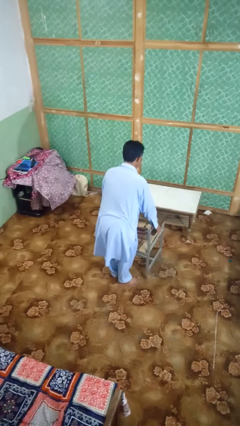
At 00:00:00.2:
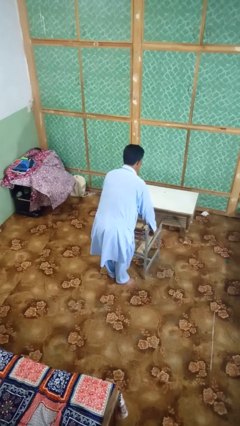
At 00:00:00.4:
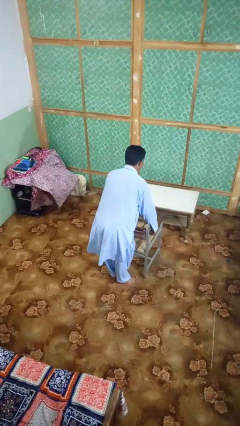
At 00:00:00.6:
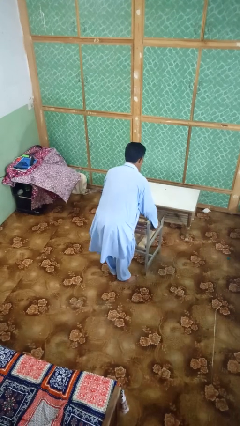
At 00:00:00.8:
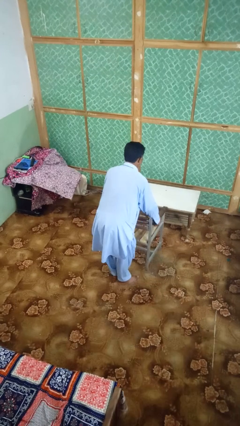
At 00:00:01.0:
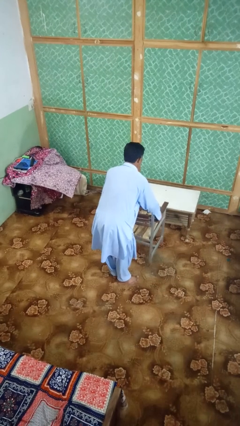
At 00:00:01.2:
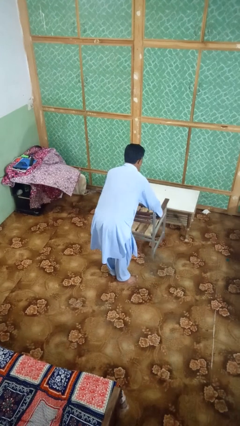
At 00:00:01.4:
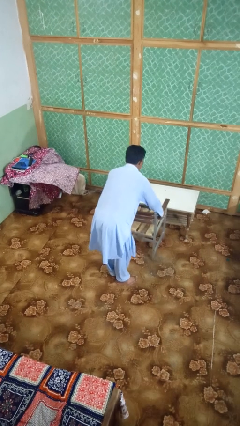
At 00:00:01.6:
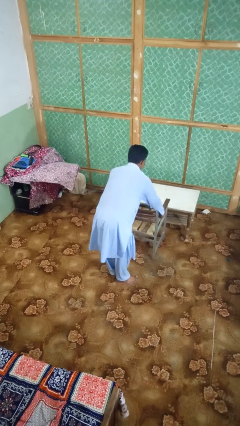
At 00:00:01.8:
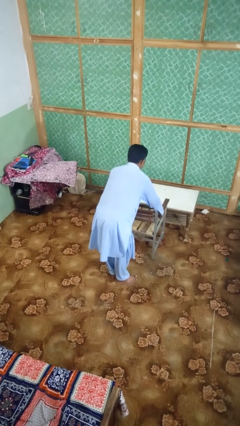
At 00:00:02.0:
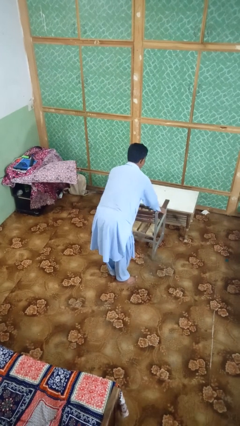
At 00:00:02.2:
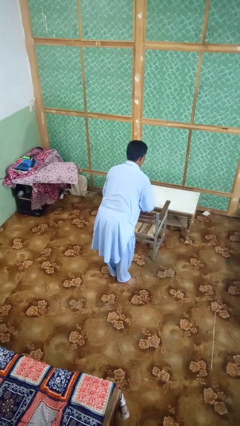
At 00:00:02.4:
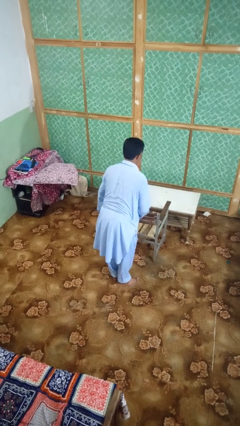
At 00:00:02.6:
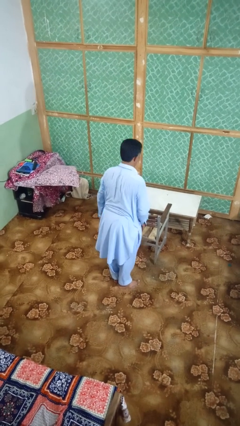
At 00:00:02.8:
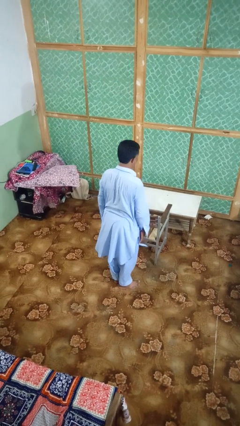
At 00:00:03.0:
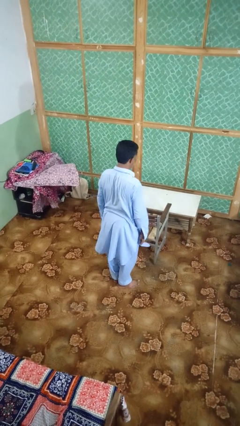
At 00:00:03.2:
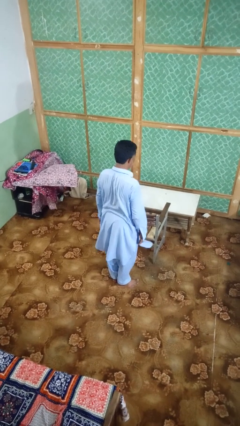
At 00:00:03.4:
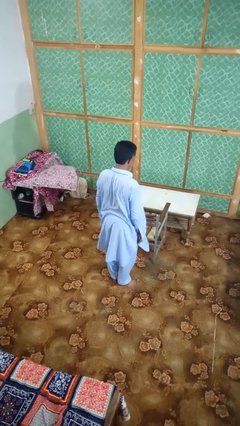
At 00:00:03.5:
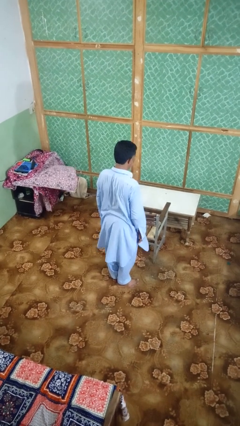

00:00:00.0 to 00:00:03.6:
person pushes in chair

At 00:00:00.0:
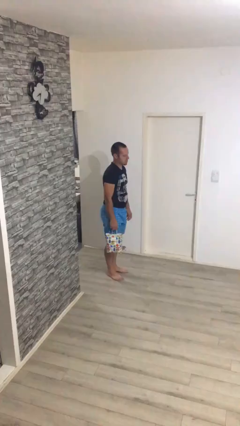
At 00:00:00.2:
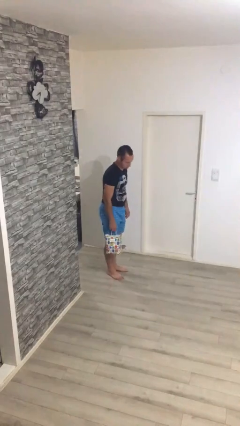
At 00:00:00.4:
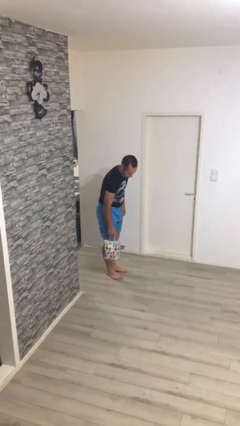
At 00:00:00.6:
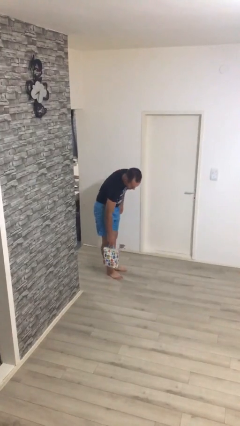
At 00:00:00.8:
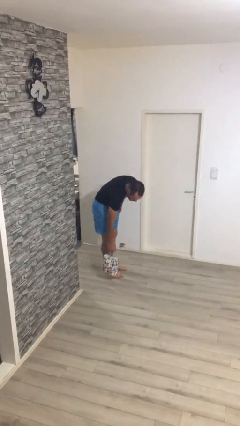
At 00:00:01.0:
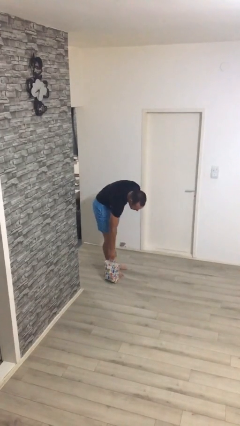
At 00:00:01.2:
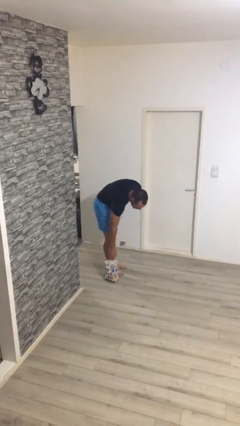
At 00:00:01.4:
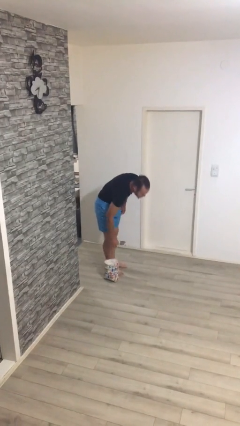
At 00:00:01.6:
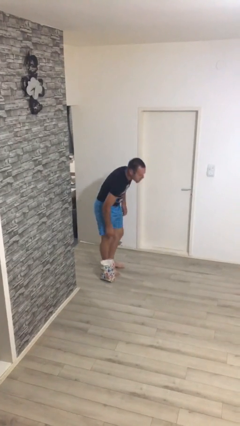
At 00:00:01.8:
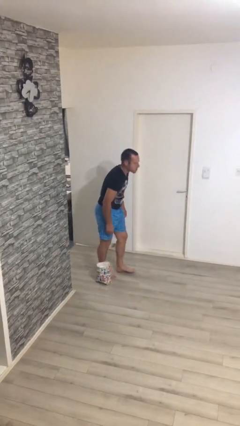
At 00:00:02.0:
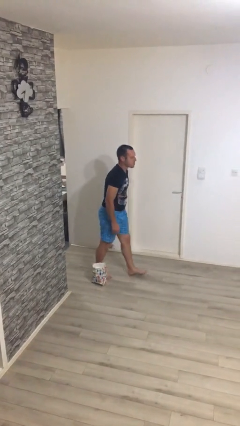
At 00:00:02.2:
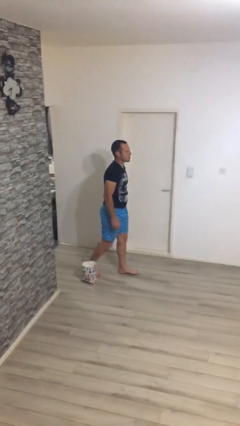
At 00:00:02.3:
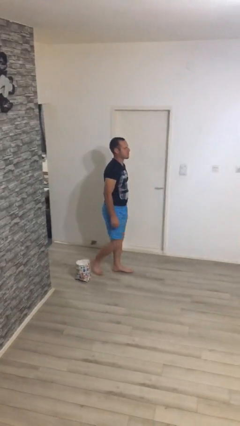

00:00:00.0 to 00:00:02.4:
person puts down object on floor

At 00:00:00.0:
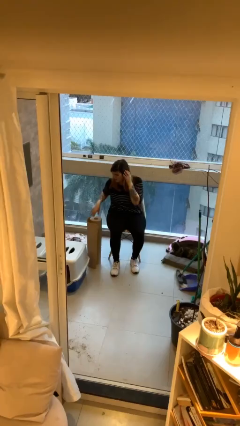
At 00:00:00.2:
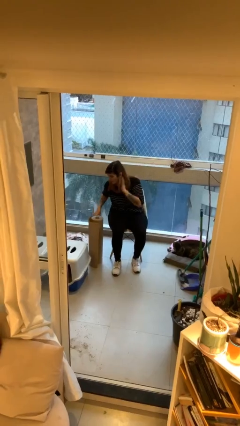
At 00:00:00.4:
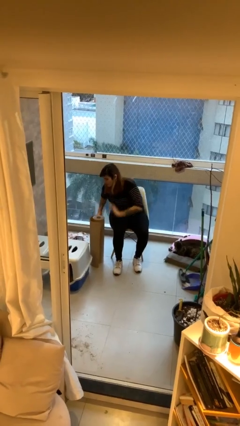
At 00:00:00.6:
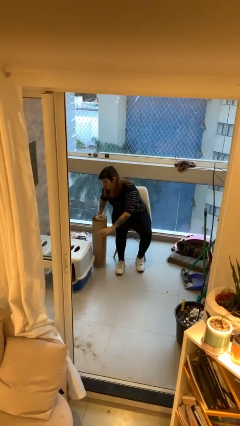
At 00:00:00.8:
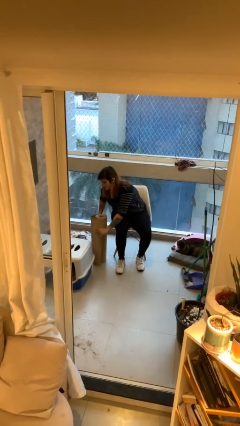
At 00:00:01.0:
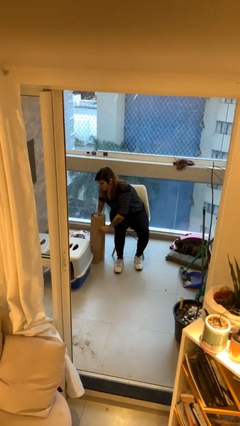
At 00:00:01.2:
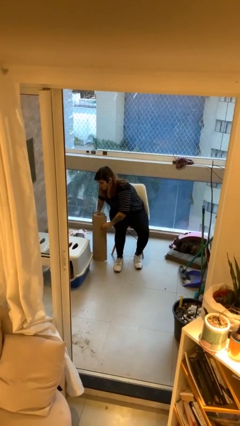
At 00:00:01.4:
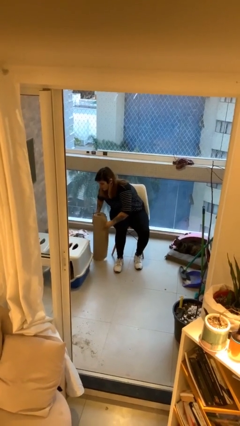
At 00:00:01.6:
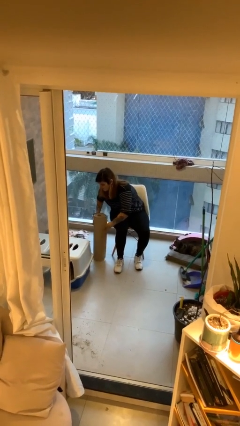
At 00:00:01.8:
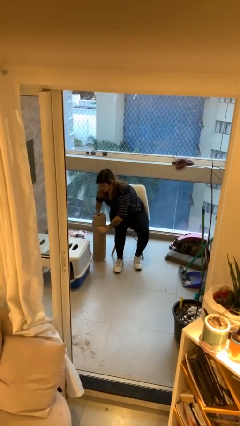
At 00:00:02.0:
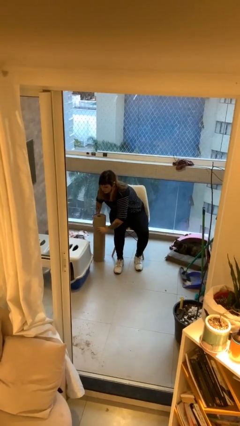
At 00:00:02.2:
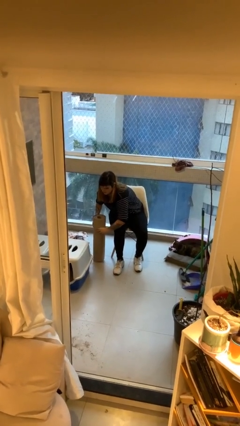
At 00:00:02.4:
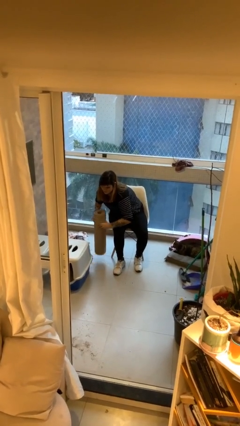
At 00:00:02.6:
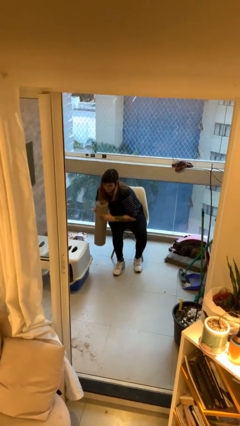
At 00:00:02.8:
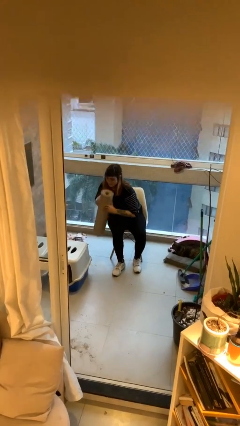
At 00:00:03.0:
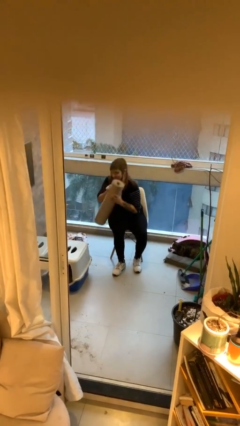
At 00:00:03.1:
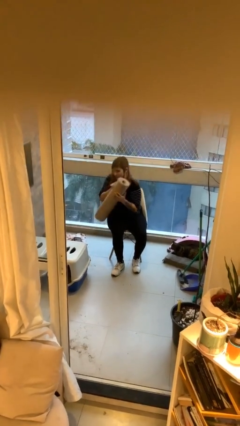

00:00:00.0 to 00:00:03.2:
person picks up object from floor

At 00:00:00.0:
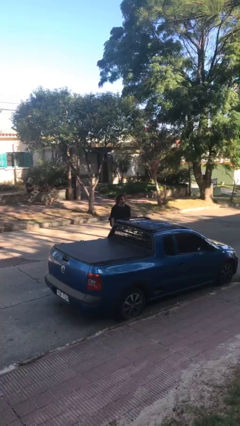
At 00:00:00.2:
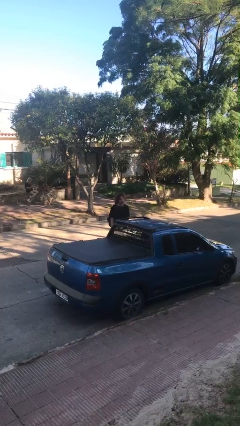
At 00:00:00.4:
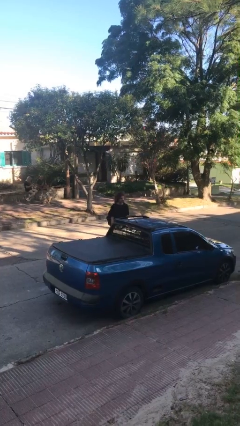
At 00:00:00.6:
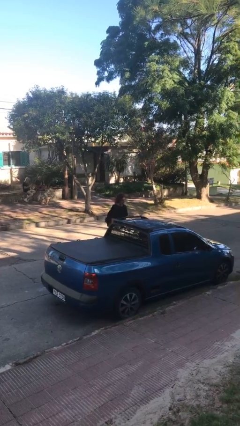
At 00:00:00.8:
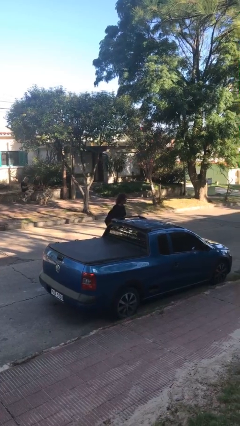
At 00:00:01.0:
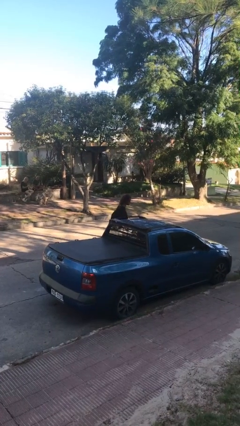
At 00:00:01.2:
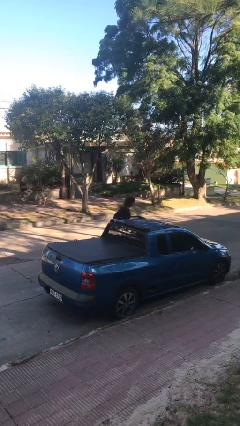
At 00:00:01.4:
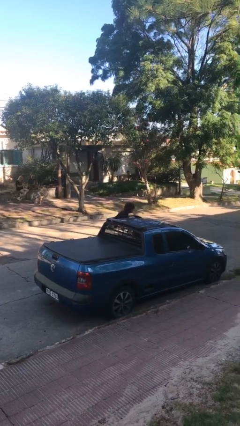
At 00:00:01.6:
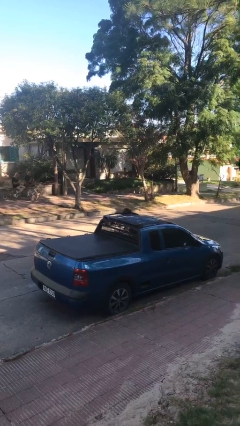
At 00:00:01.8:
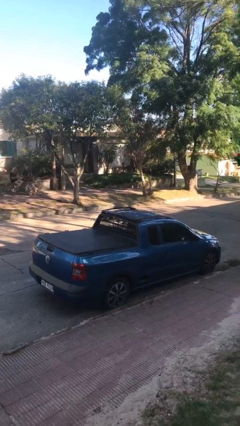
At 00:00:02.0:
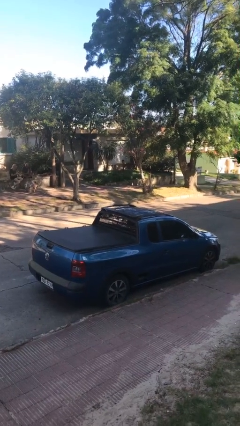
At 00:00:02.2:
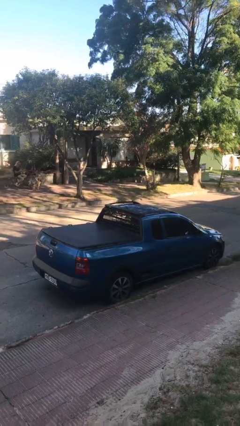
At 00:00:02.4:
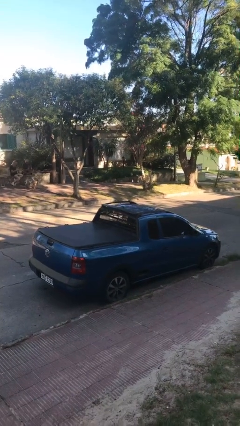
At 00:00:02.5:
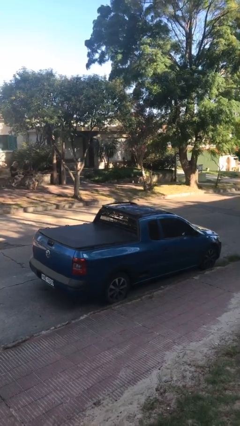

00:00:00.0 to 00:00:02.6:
person enters car

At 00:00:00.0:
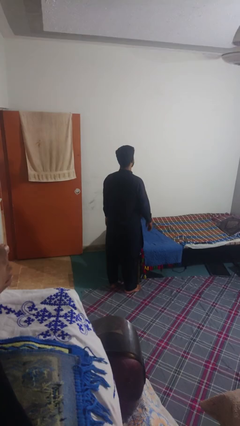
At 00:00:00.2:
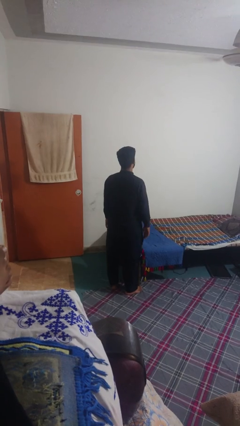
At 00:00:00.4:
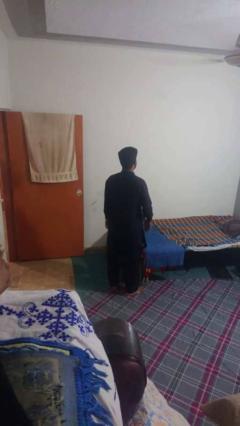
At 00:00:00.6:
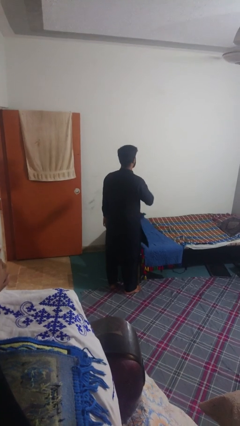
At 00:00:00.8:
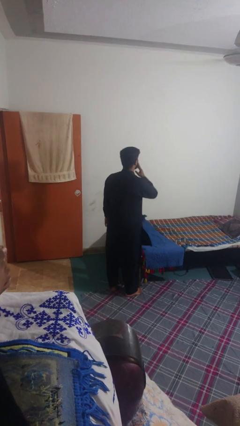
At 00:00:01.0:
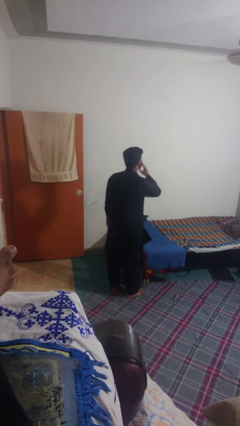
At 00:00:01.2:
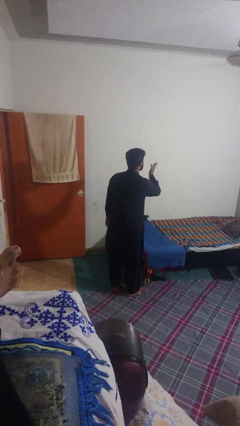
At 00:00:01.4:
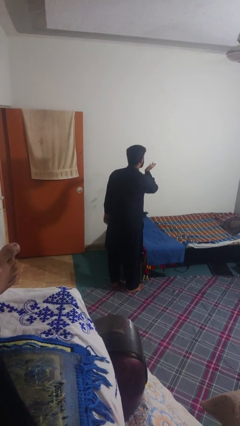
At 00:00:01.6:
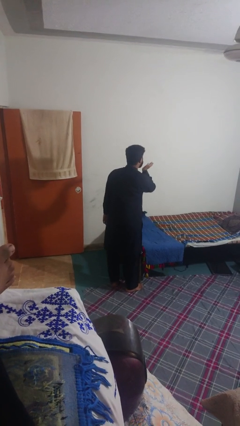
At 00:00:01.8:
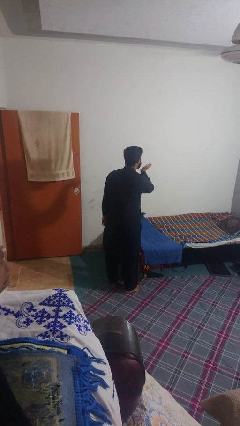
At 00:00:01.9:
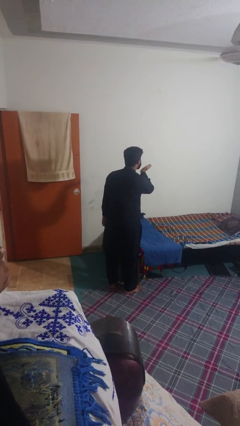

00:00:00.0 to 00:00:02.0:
person gestures blow kiss

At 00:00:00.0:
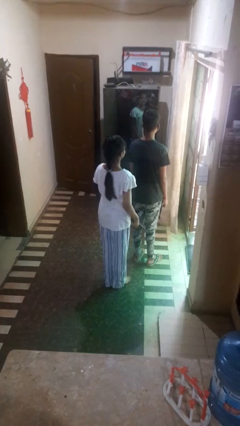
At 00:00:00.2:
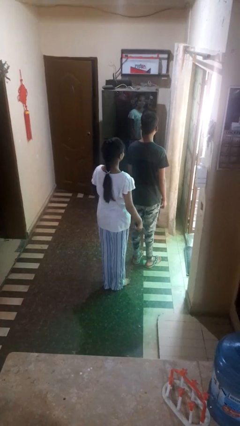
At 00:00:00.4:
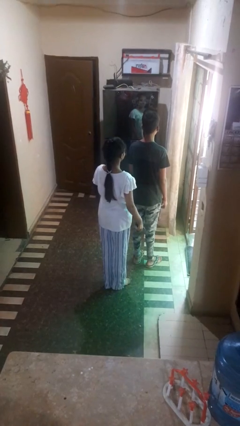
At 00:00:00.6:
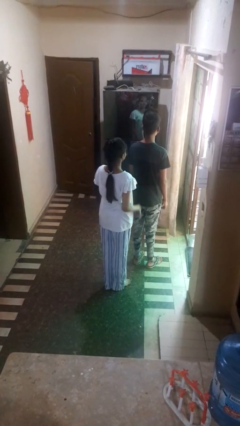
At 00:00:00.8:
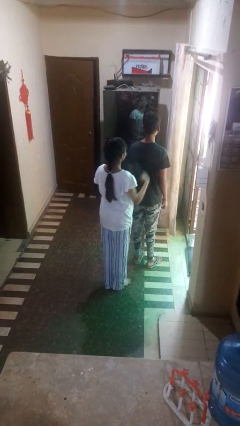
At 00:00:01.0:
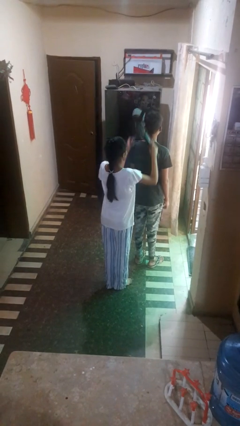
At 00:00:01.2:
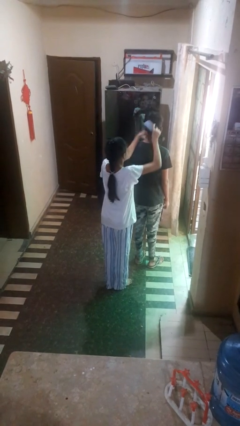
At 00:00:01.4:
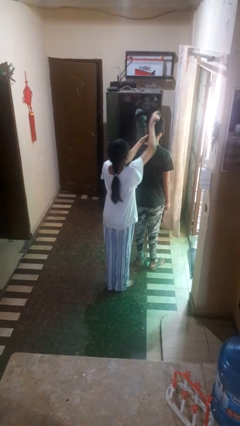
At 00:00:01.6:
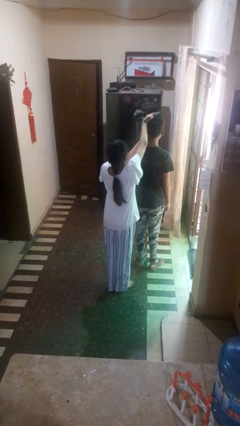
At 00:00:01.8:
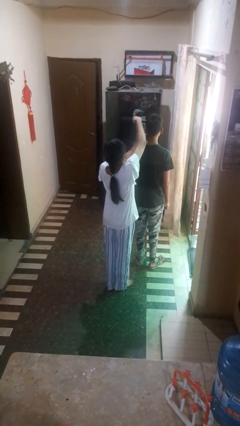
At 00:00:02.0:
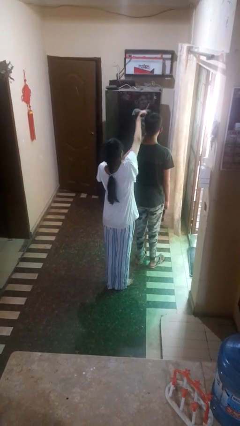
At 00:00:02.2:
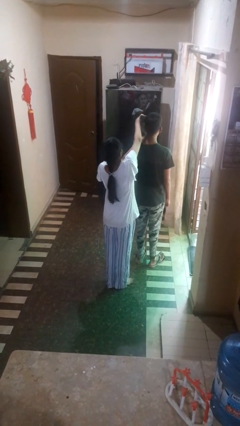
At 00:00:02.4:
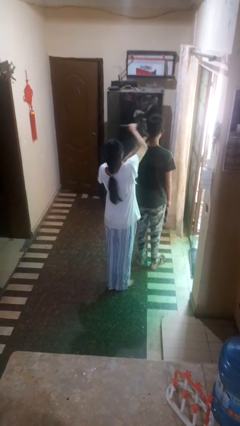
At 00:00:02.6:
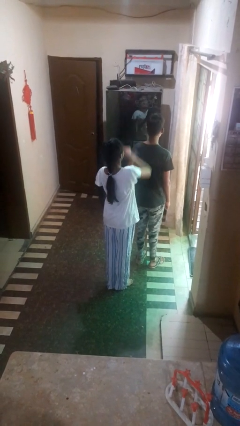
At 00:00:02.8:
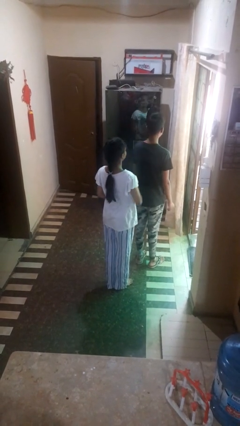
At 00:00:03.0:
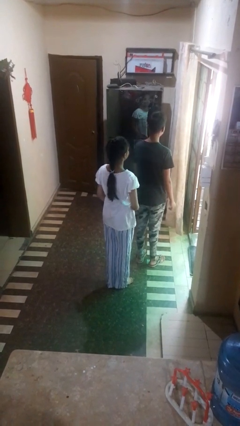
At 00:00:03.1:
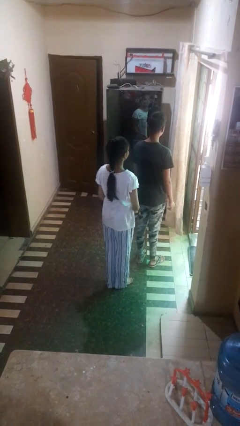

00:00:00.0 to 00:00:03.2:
person brushes hair of person
